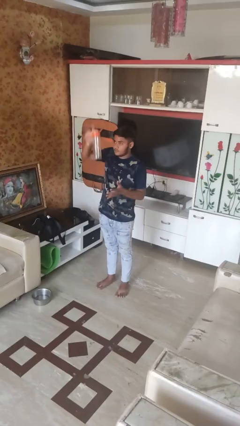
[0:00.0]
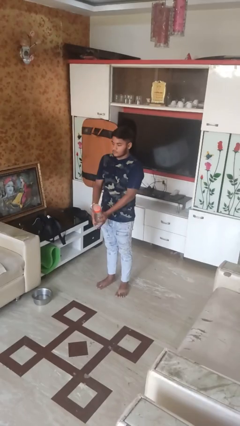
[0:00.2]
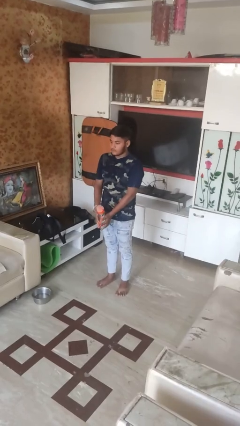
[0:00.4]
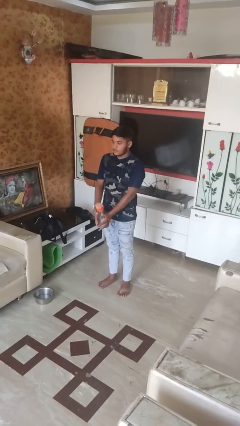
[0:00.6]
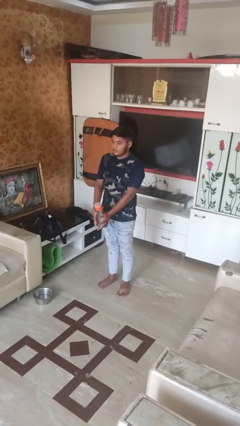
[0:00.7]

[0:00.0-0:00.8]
person catches dropped object

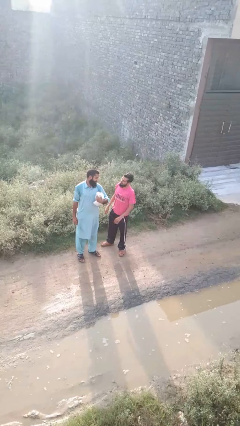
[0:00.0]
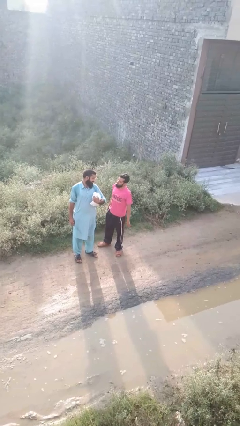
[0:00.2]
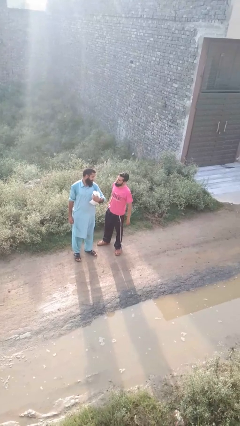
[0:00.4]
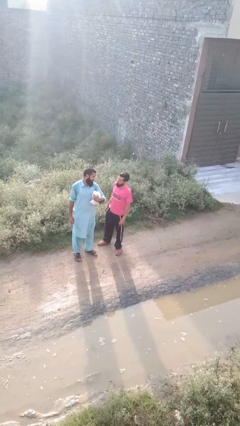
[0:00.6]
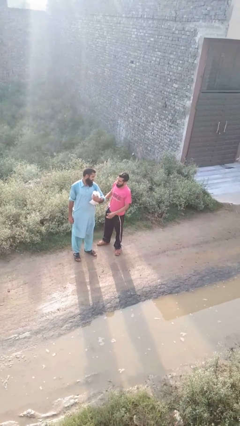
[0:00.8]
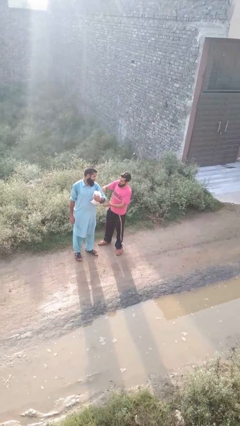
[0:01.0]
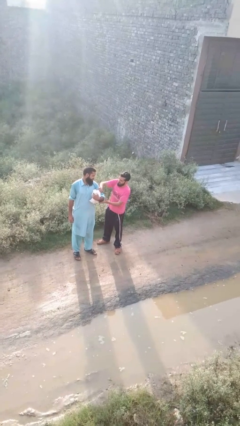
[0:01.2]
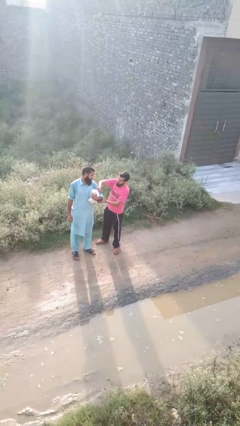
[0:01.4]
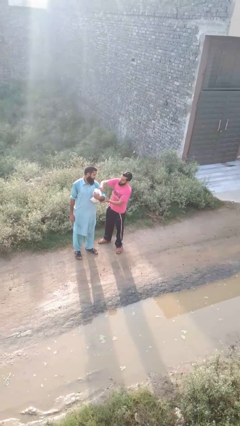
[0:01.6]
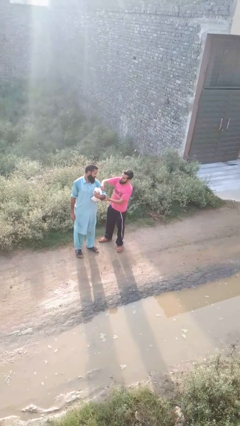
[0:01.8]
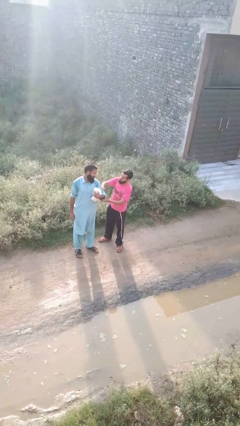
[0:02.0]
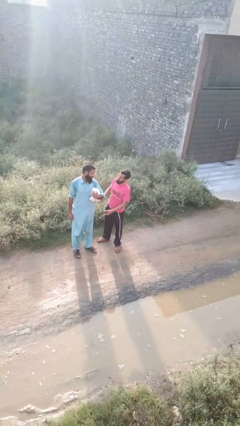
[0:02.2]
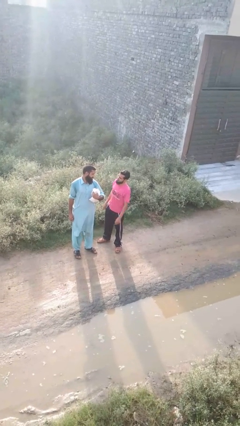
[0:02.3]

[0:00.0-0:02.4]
person grabs person by bicep

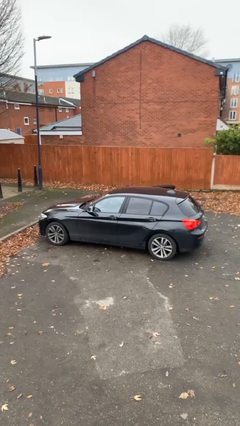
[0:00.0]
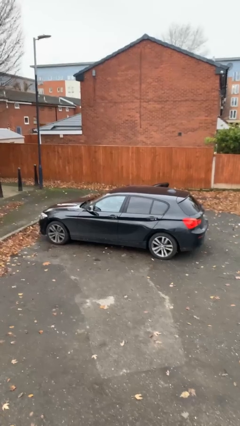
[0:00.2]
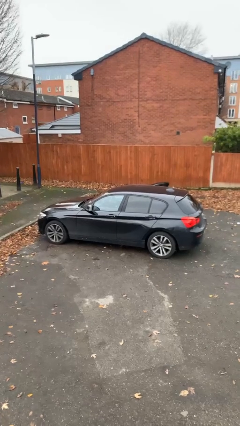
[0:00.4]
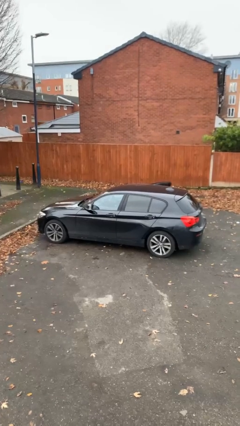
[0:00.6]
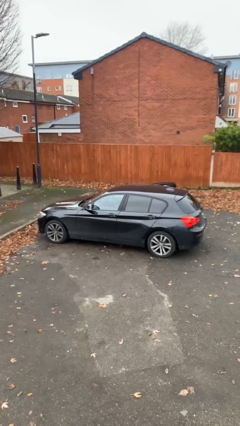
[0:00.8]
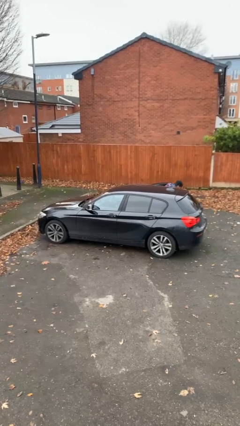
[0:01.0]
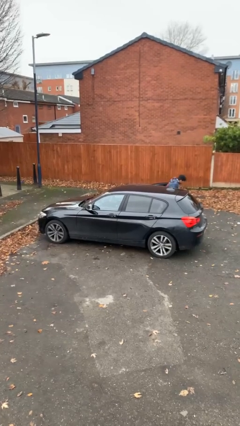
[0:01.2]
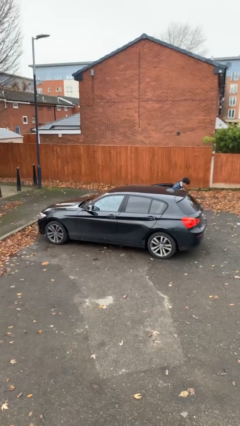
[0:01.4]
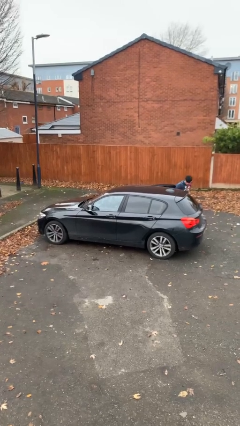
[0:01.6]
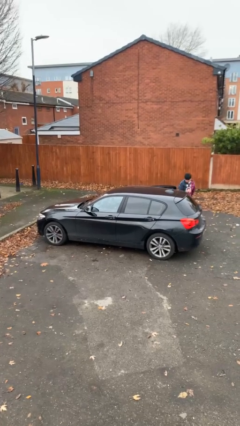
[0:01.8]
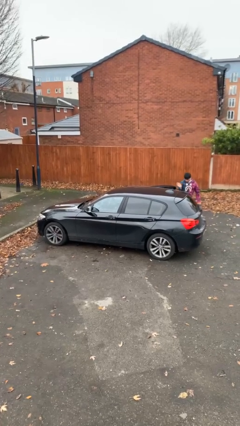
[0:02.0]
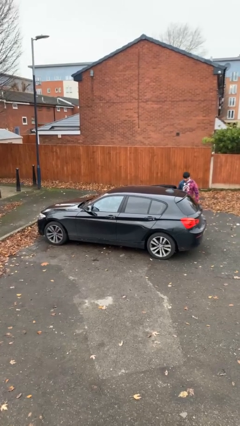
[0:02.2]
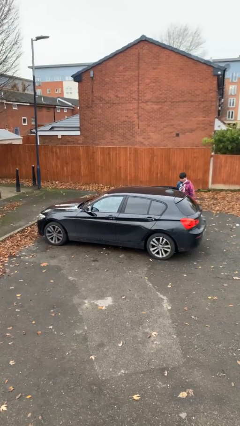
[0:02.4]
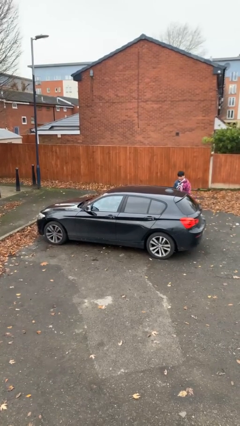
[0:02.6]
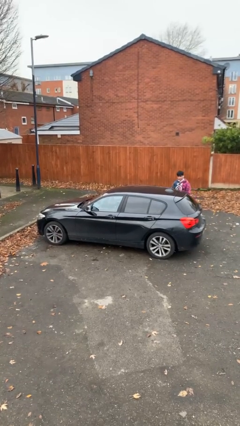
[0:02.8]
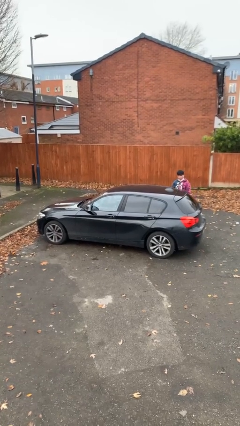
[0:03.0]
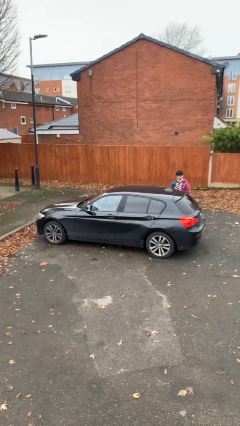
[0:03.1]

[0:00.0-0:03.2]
car drops off person

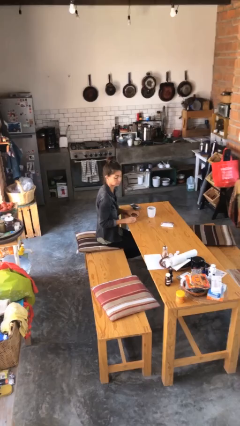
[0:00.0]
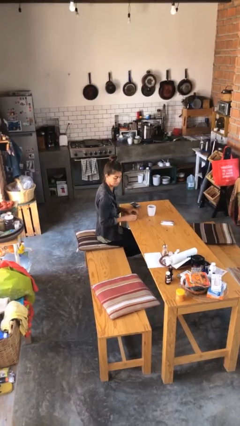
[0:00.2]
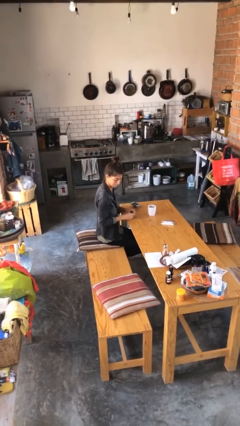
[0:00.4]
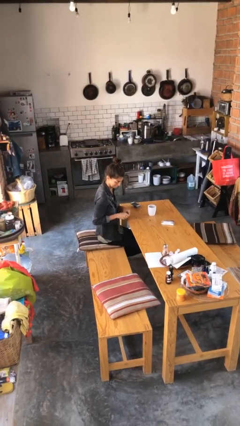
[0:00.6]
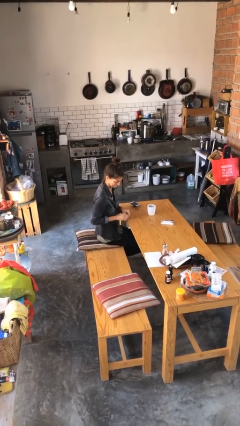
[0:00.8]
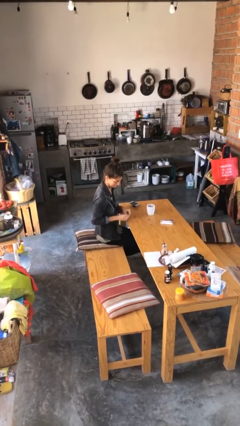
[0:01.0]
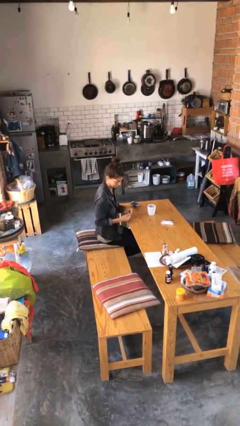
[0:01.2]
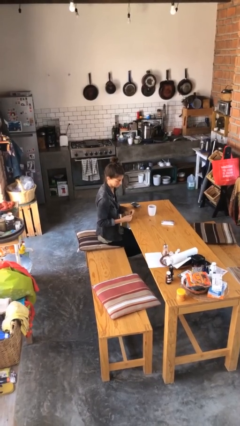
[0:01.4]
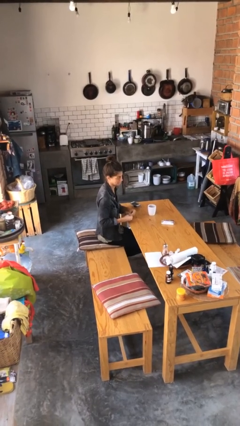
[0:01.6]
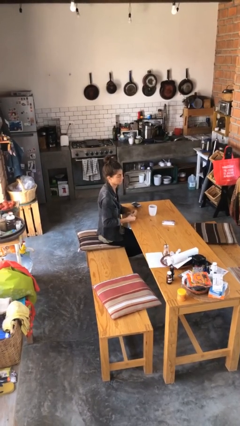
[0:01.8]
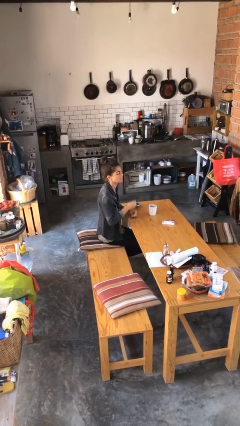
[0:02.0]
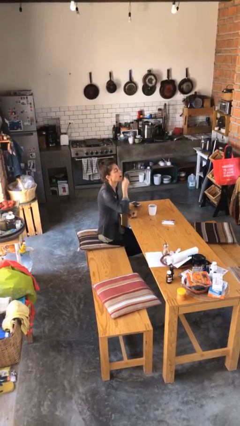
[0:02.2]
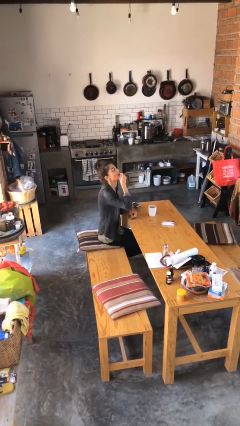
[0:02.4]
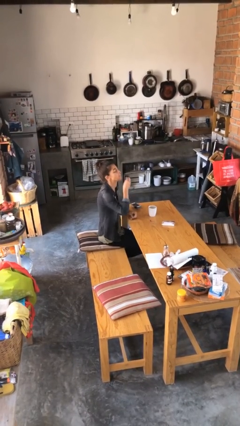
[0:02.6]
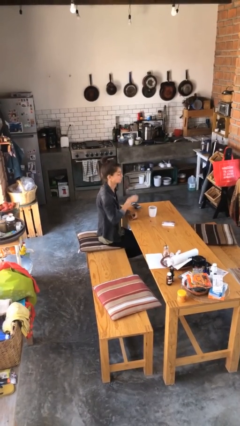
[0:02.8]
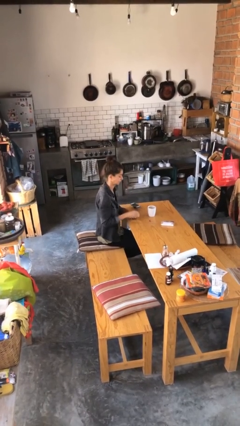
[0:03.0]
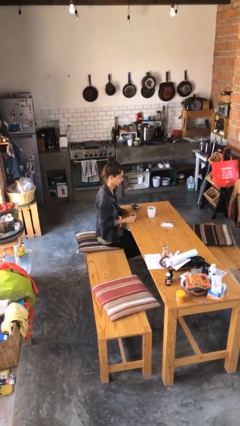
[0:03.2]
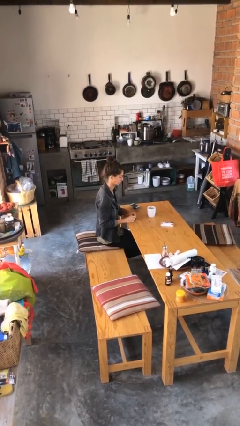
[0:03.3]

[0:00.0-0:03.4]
person takes medicine pills

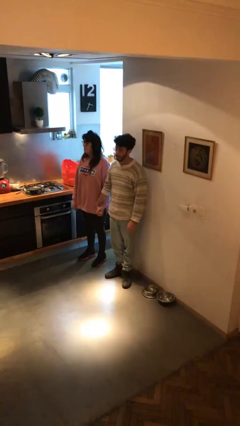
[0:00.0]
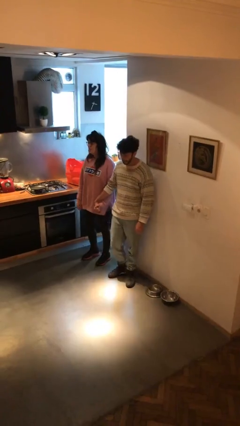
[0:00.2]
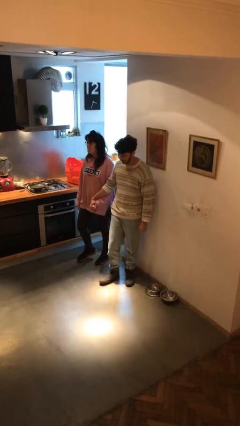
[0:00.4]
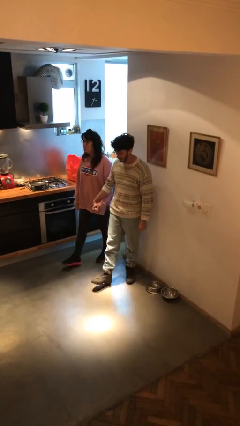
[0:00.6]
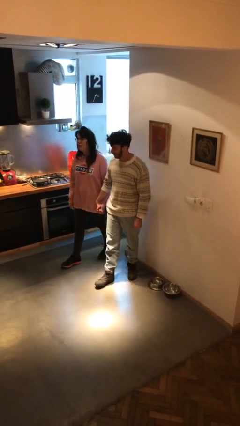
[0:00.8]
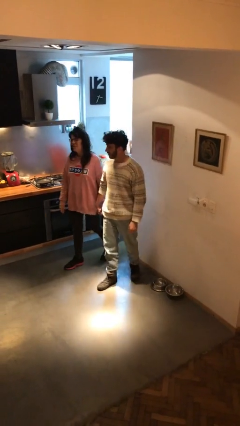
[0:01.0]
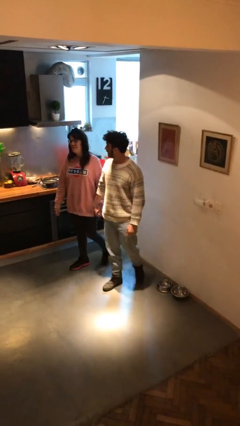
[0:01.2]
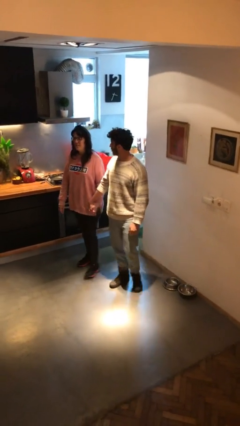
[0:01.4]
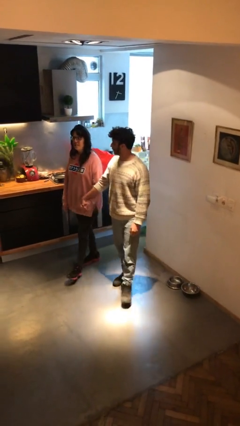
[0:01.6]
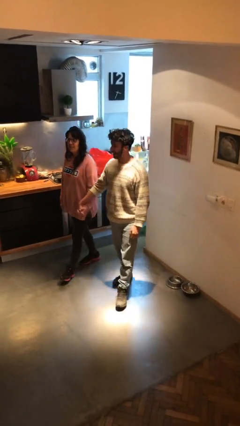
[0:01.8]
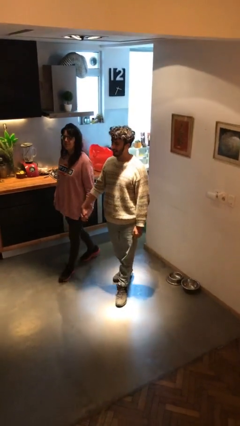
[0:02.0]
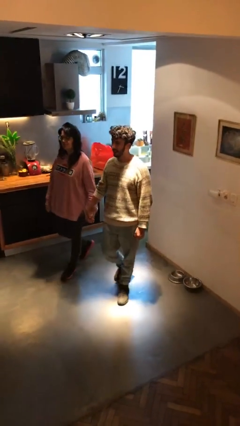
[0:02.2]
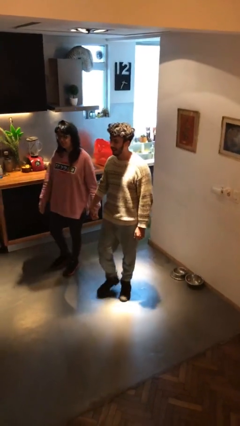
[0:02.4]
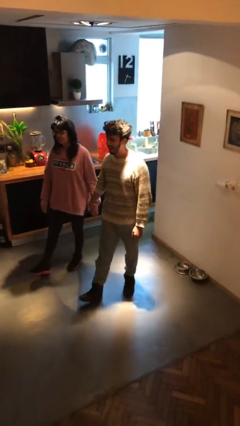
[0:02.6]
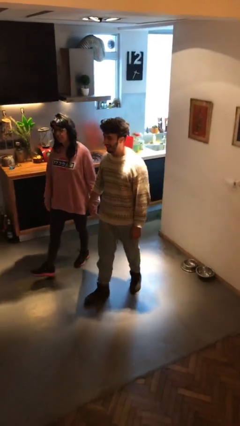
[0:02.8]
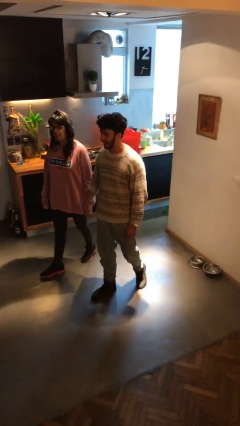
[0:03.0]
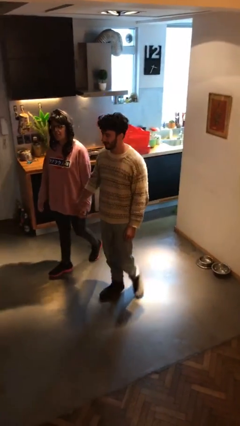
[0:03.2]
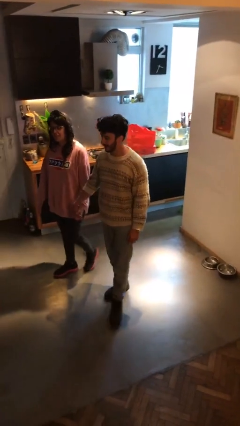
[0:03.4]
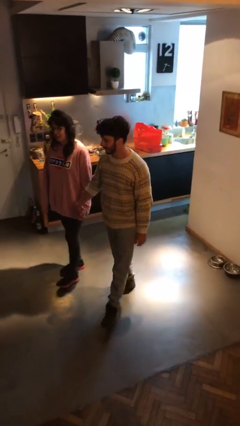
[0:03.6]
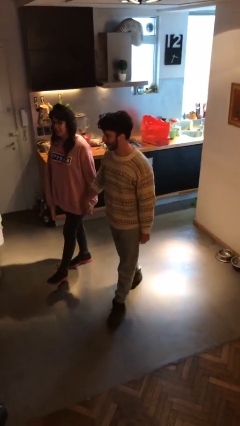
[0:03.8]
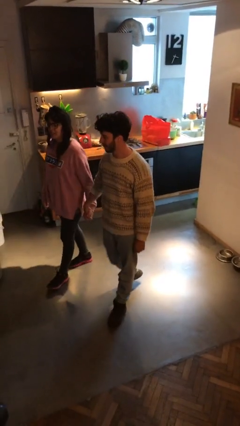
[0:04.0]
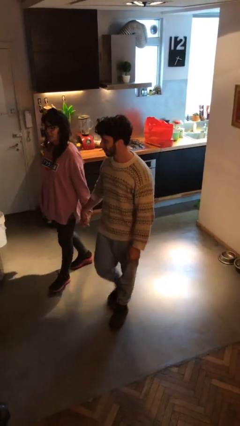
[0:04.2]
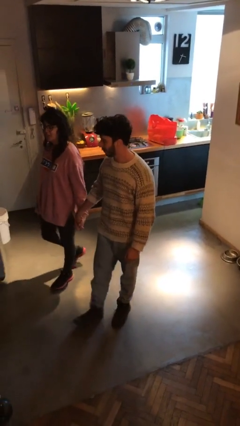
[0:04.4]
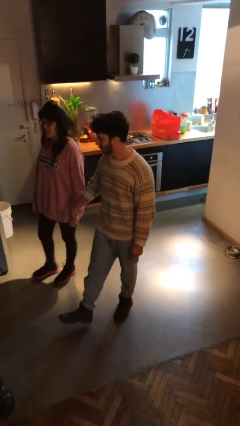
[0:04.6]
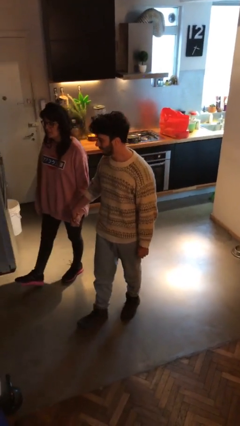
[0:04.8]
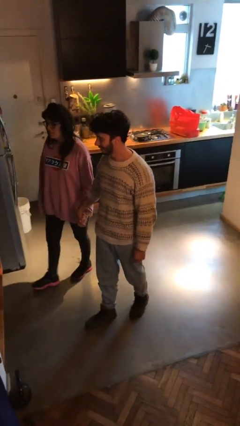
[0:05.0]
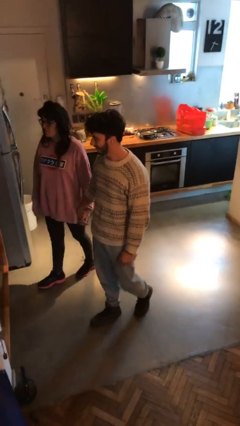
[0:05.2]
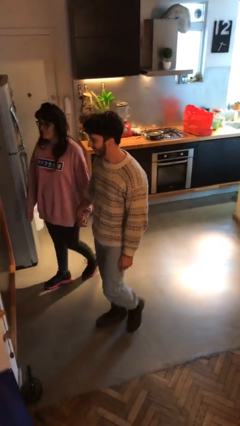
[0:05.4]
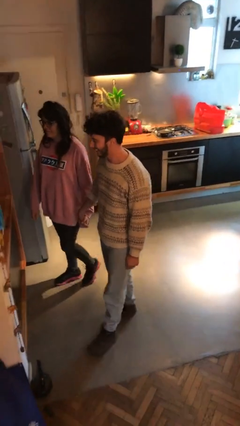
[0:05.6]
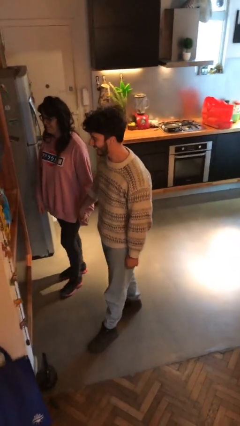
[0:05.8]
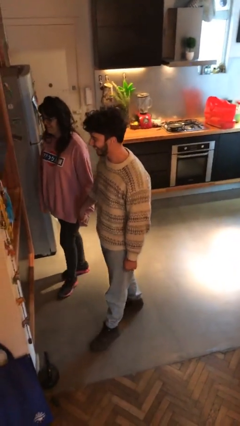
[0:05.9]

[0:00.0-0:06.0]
person holds hand

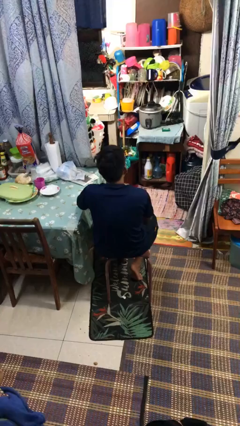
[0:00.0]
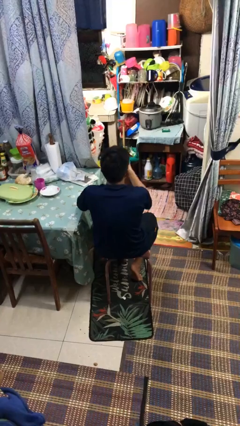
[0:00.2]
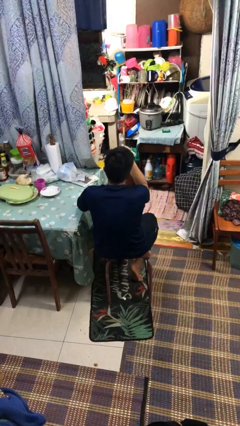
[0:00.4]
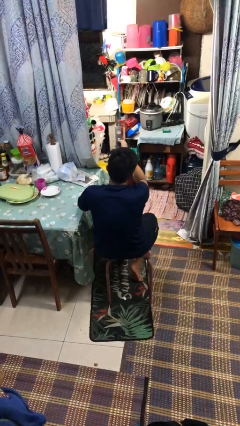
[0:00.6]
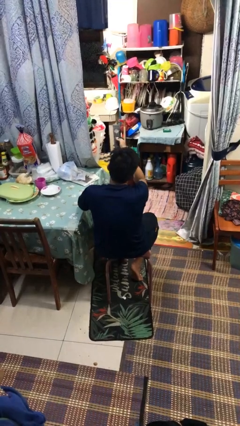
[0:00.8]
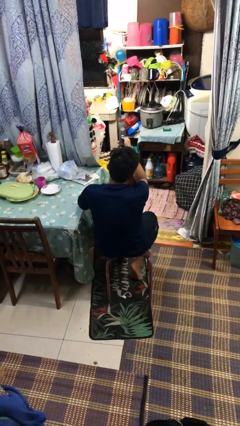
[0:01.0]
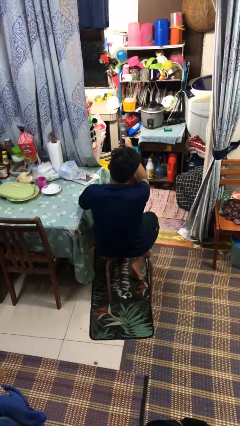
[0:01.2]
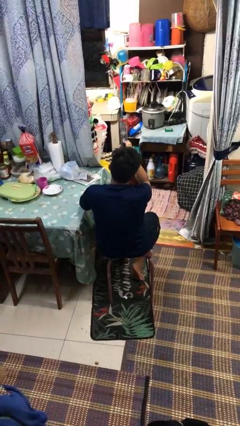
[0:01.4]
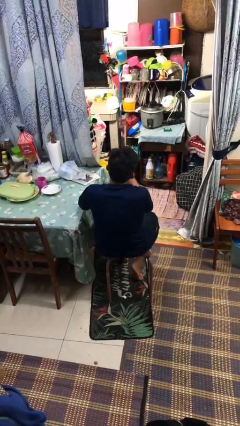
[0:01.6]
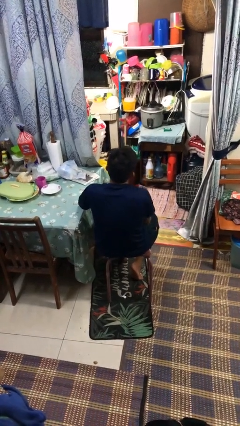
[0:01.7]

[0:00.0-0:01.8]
person uses television remote
